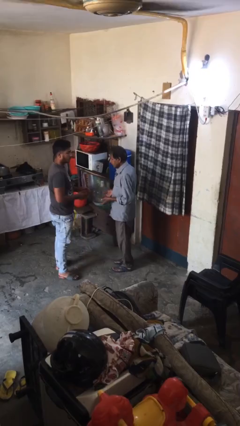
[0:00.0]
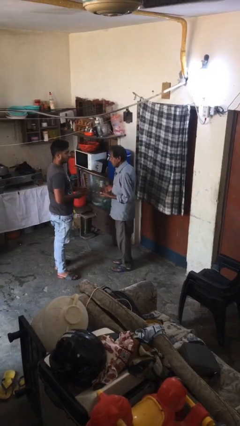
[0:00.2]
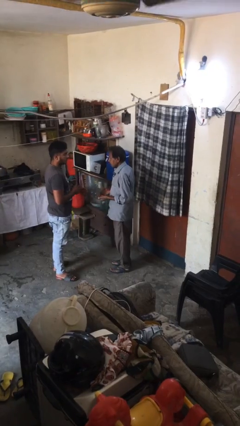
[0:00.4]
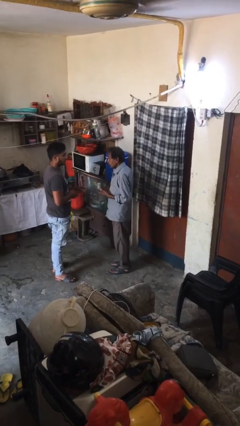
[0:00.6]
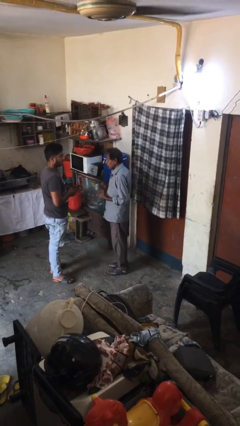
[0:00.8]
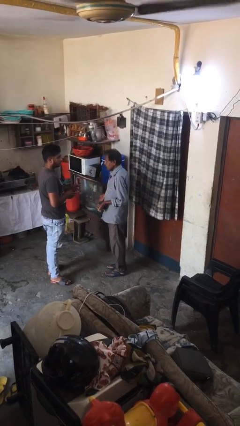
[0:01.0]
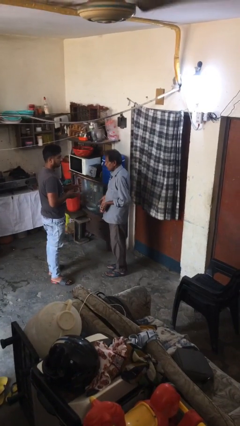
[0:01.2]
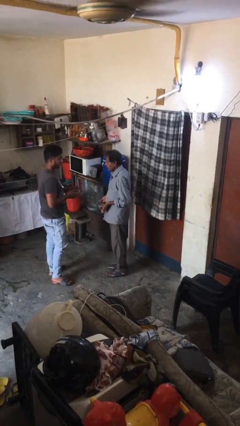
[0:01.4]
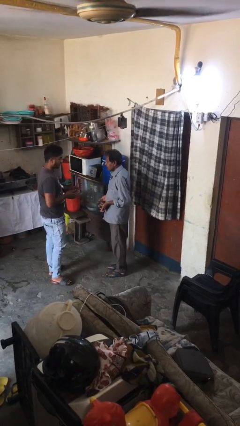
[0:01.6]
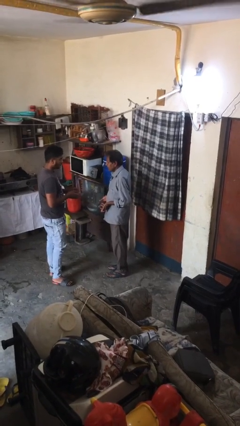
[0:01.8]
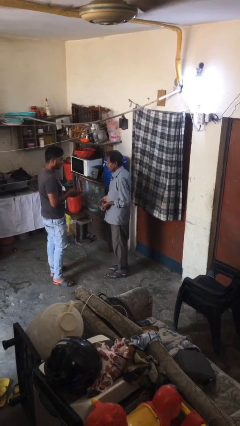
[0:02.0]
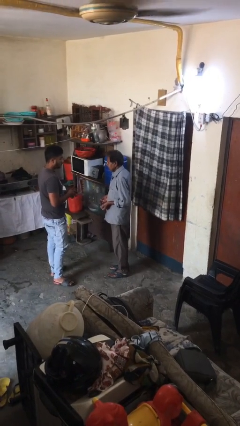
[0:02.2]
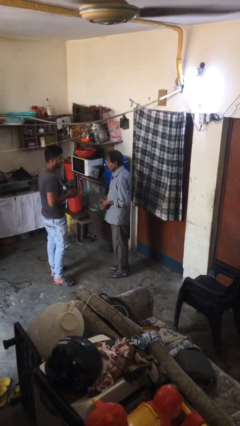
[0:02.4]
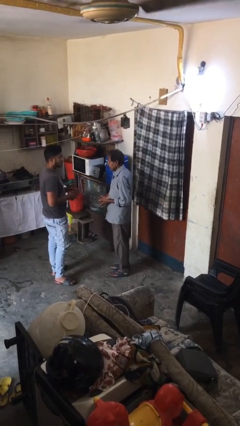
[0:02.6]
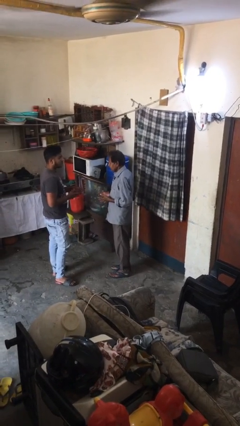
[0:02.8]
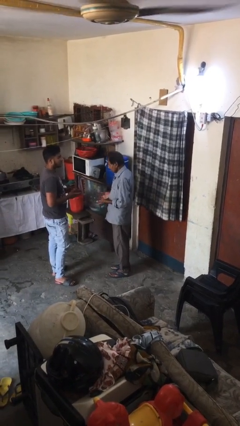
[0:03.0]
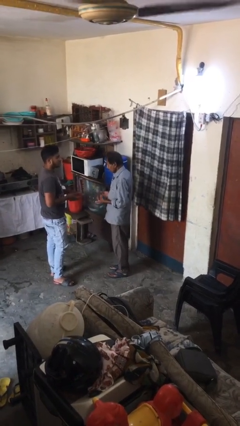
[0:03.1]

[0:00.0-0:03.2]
person talks to person

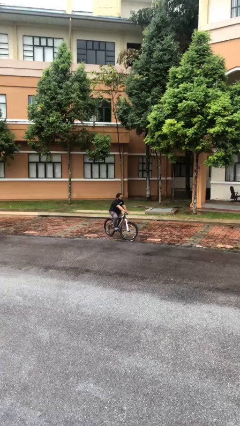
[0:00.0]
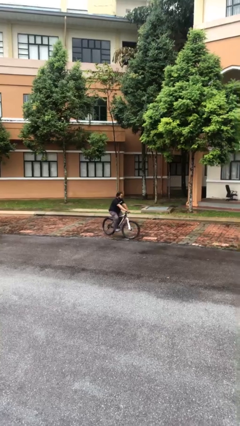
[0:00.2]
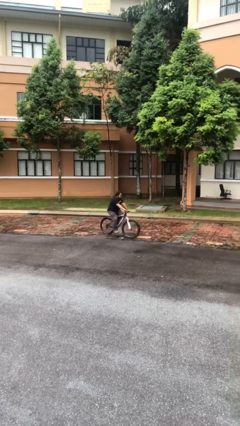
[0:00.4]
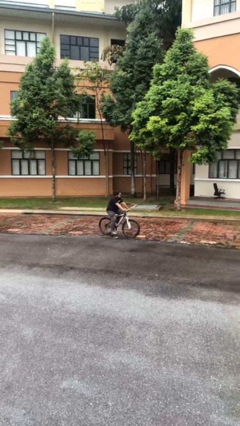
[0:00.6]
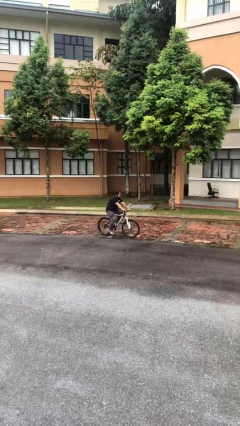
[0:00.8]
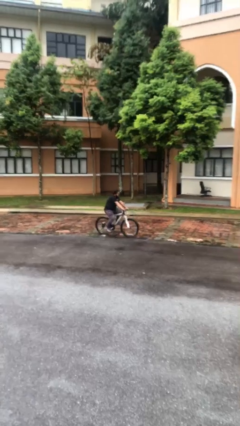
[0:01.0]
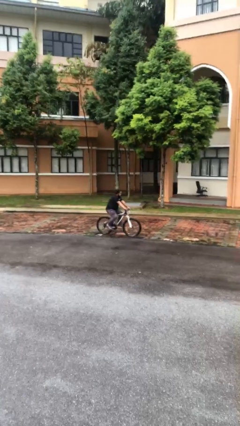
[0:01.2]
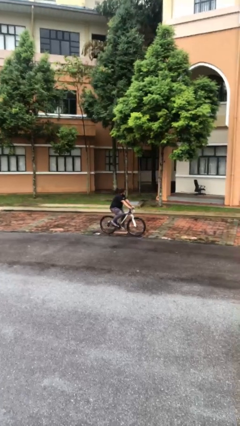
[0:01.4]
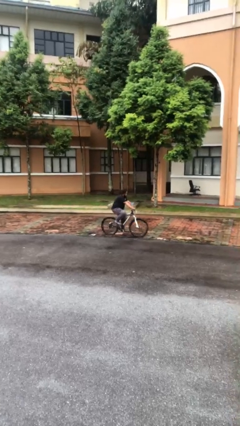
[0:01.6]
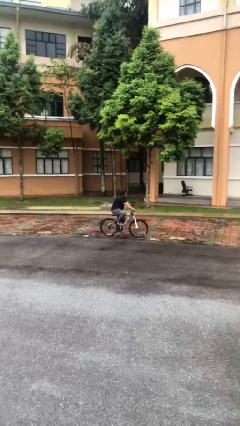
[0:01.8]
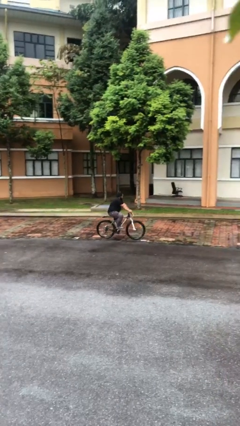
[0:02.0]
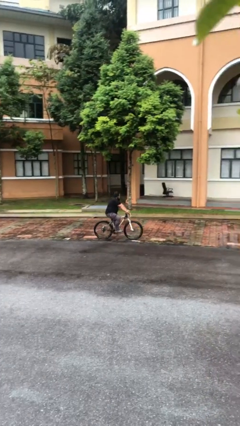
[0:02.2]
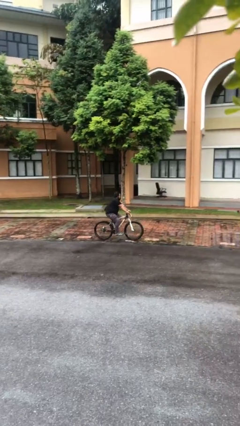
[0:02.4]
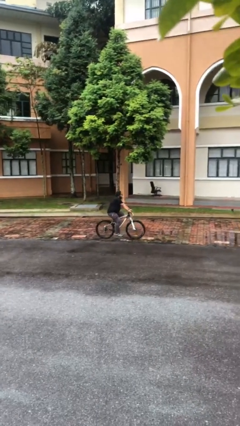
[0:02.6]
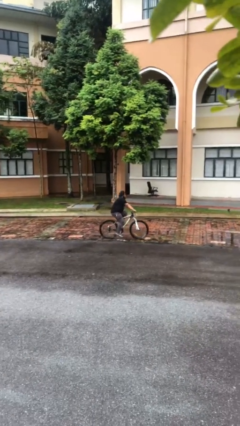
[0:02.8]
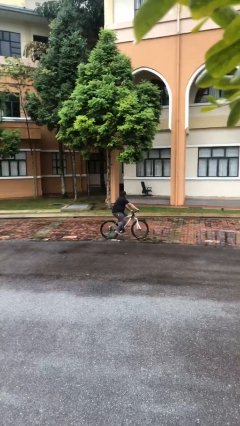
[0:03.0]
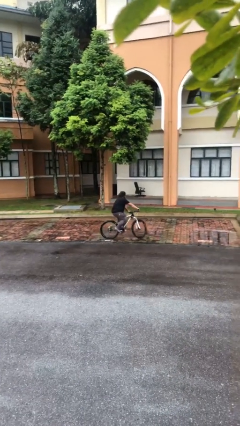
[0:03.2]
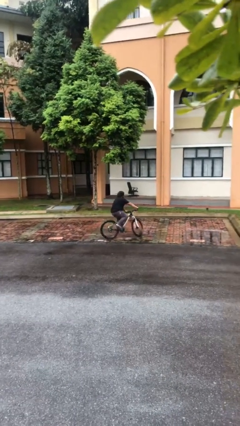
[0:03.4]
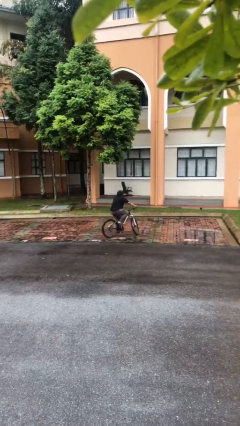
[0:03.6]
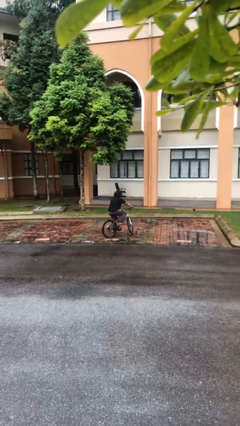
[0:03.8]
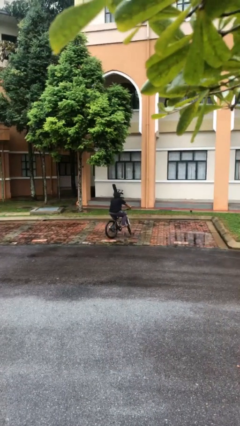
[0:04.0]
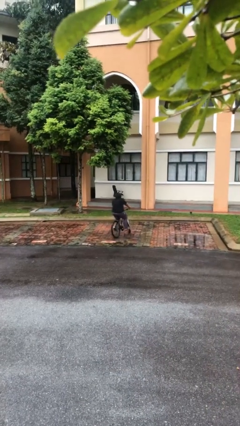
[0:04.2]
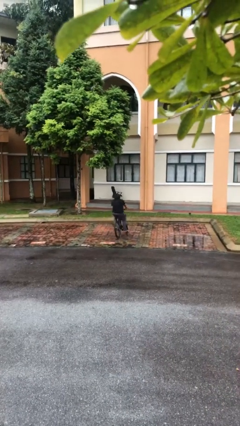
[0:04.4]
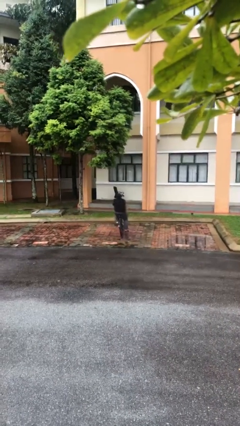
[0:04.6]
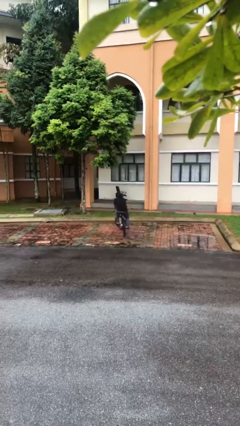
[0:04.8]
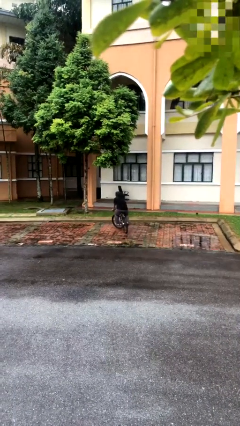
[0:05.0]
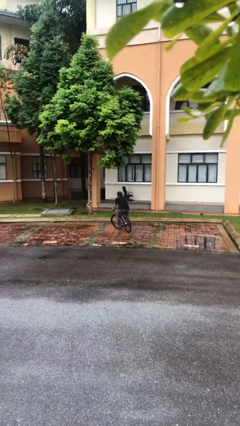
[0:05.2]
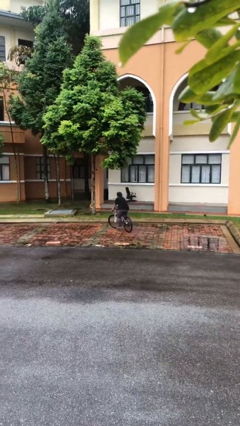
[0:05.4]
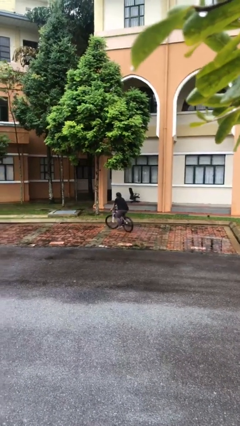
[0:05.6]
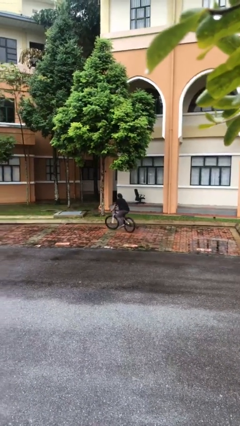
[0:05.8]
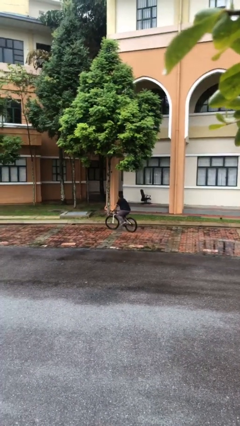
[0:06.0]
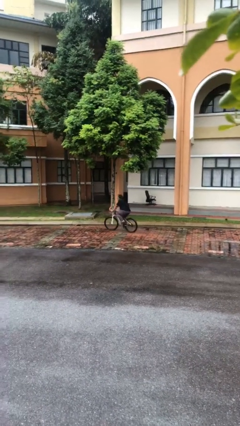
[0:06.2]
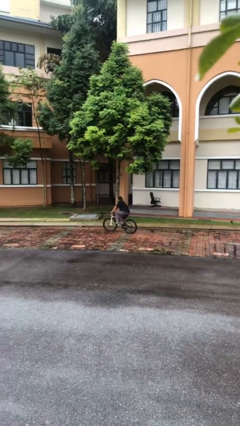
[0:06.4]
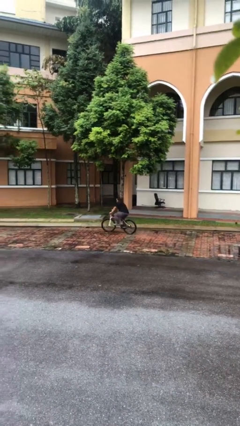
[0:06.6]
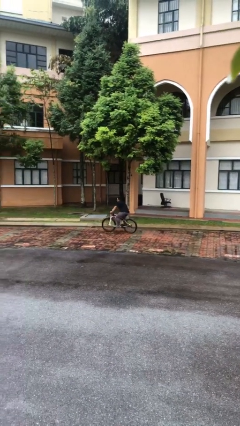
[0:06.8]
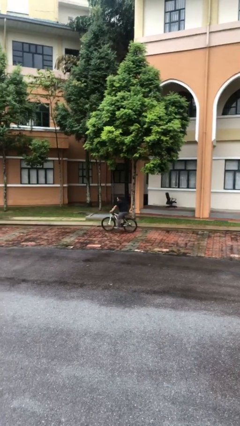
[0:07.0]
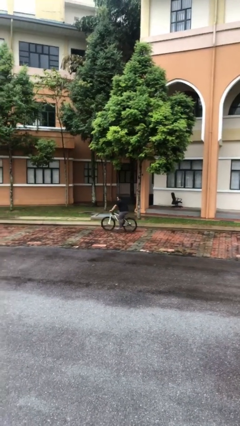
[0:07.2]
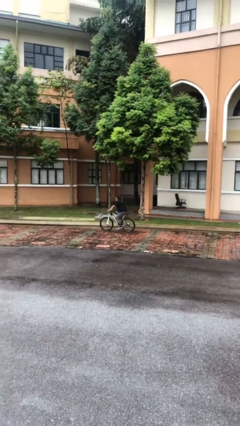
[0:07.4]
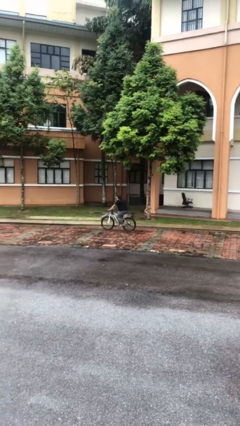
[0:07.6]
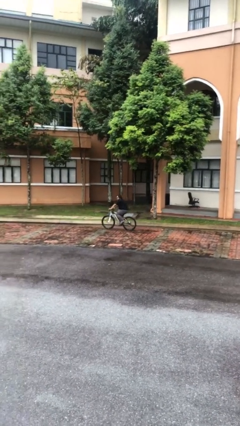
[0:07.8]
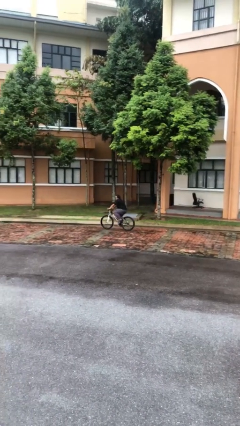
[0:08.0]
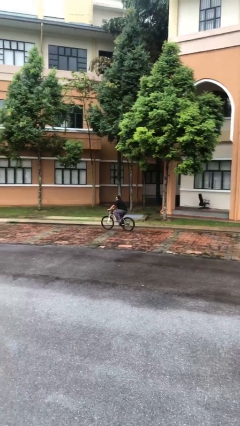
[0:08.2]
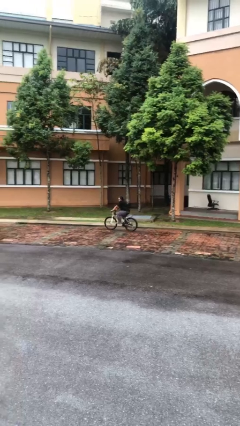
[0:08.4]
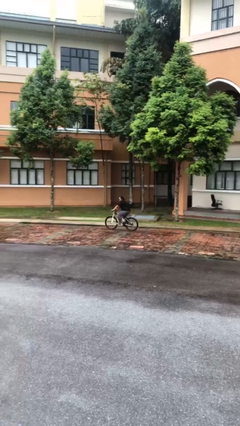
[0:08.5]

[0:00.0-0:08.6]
person rides bicycle

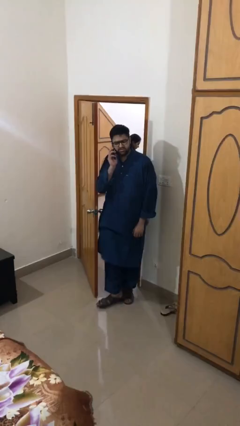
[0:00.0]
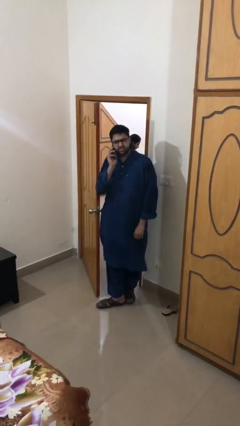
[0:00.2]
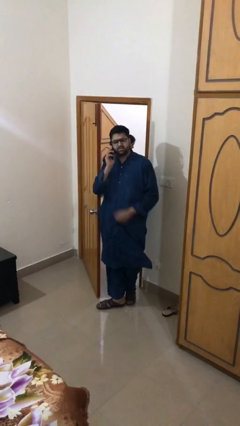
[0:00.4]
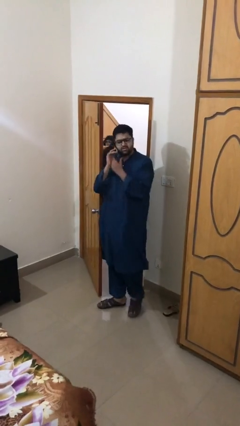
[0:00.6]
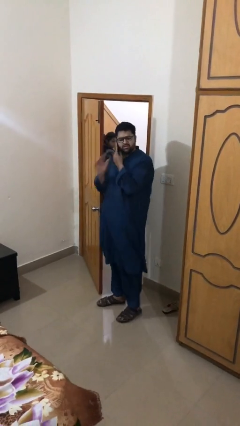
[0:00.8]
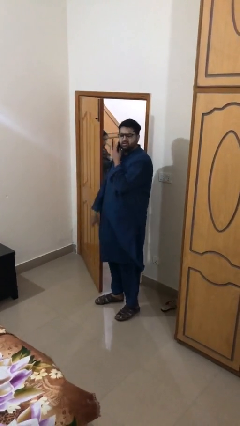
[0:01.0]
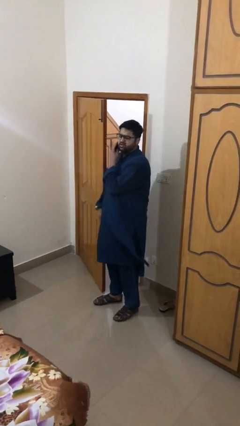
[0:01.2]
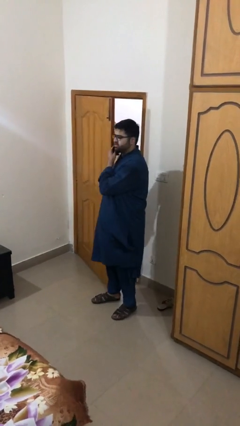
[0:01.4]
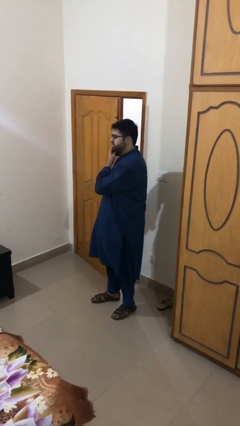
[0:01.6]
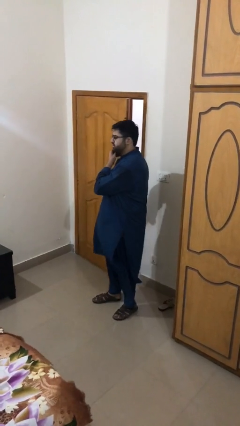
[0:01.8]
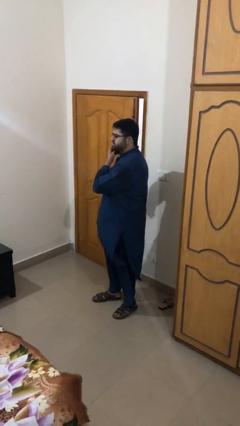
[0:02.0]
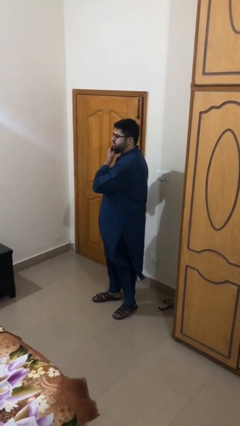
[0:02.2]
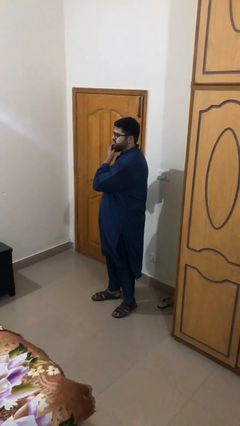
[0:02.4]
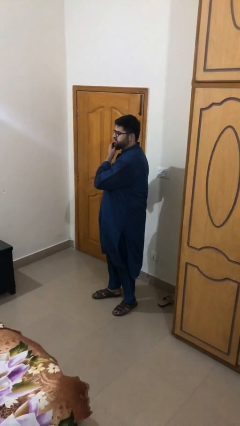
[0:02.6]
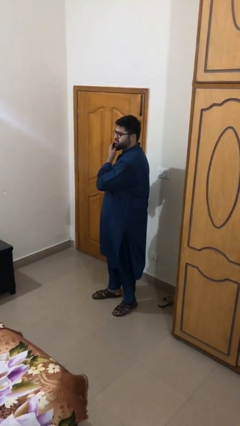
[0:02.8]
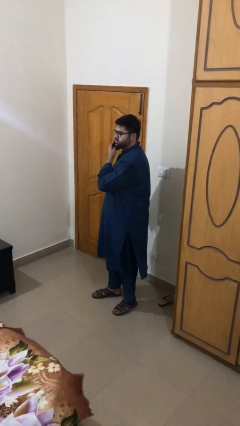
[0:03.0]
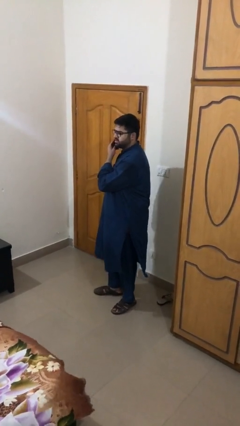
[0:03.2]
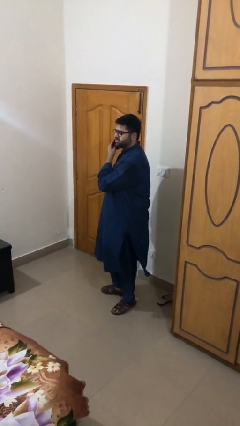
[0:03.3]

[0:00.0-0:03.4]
person closes facility door

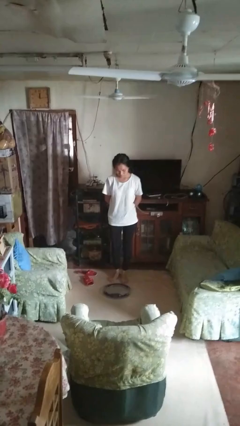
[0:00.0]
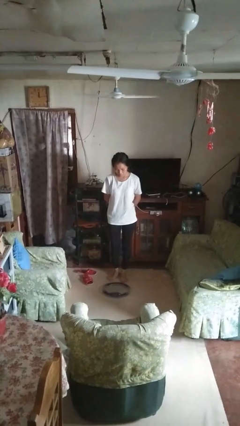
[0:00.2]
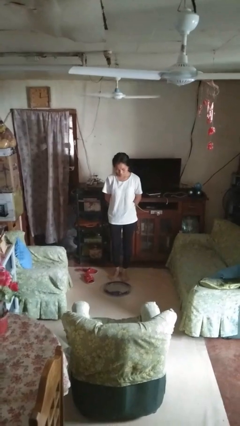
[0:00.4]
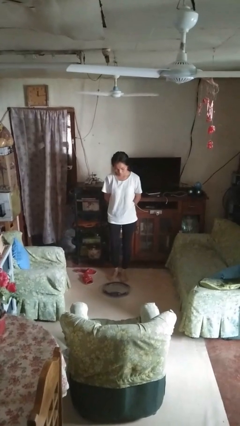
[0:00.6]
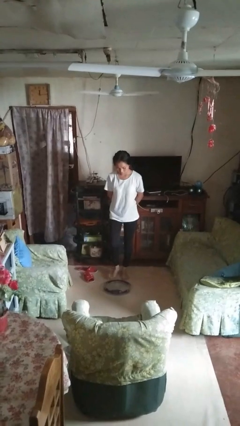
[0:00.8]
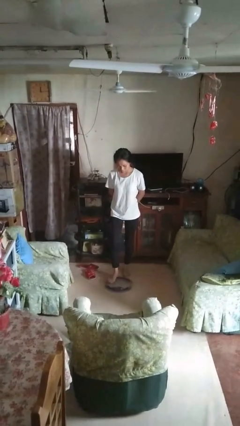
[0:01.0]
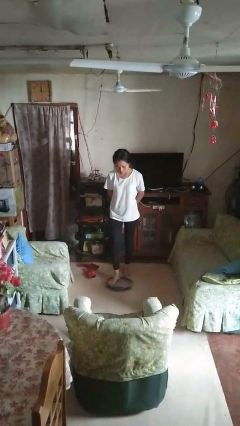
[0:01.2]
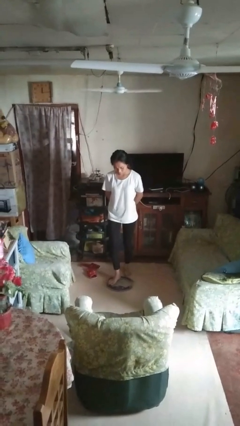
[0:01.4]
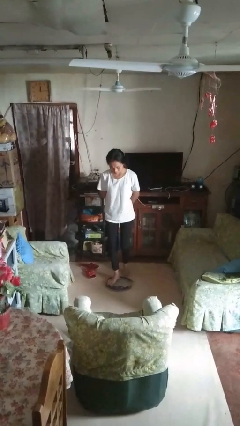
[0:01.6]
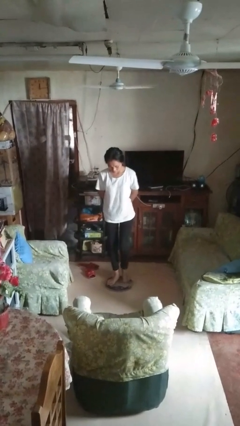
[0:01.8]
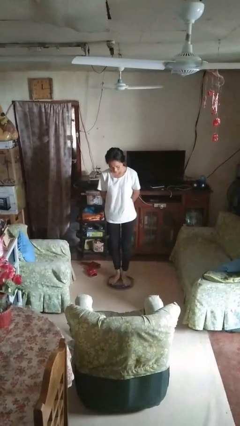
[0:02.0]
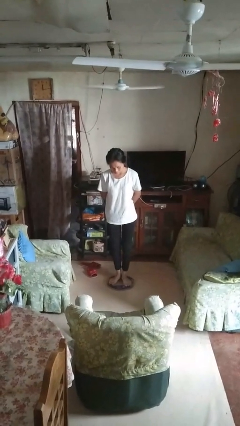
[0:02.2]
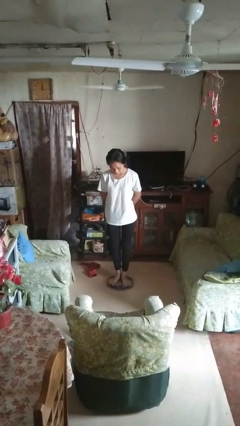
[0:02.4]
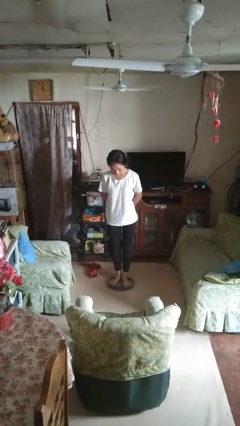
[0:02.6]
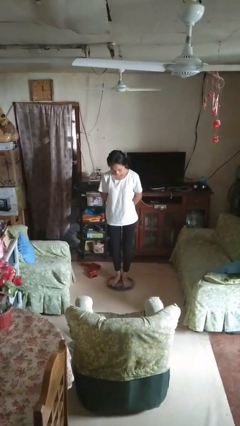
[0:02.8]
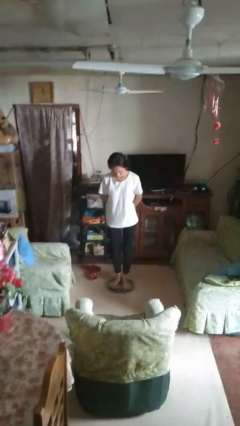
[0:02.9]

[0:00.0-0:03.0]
person uses bodyweight scale
